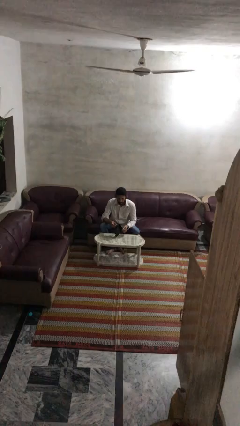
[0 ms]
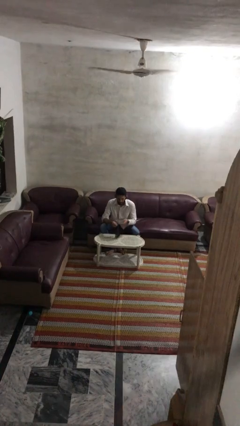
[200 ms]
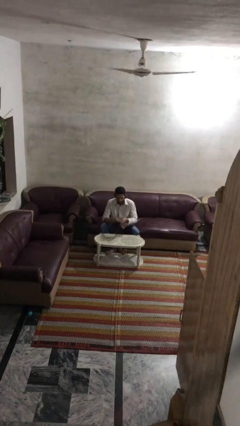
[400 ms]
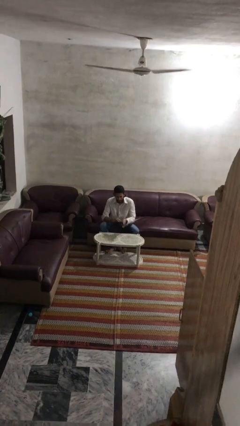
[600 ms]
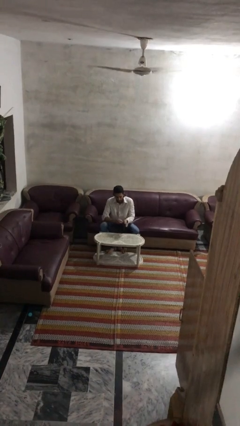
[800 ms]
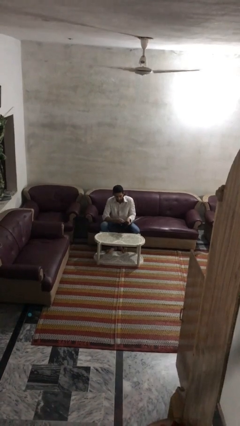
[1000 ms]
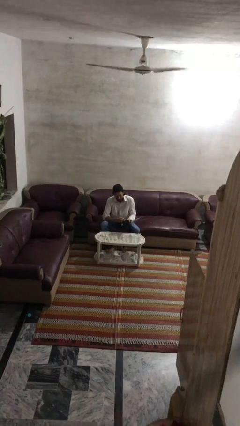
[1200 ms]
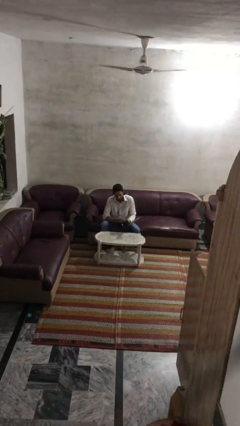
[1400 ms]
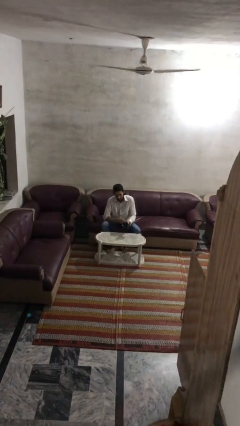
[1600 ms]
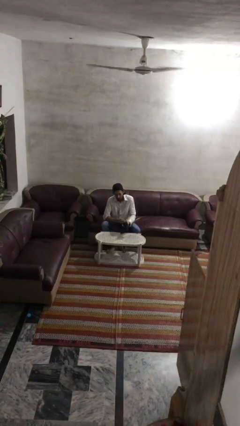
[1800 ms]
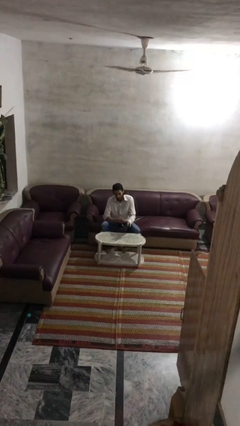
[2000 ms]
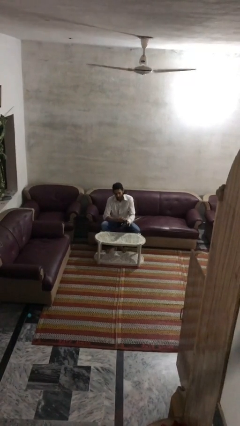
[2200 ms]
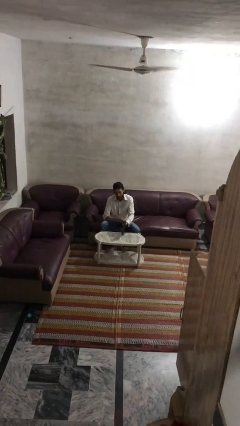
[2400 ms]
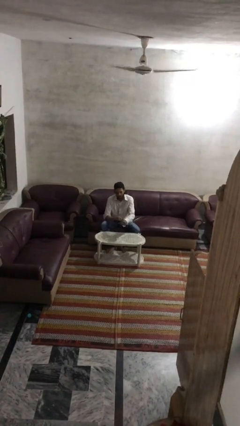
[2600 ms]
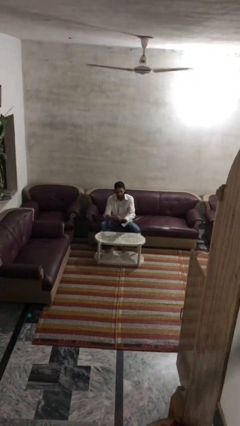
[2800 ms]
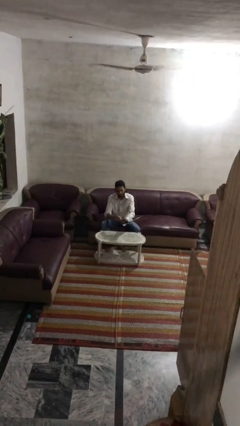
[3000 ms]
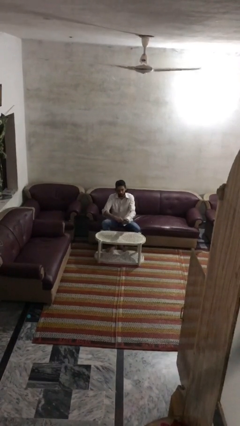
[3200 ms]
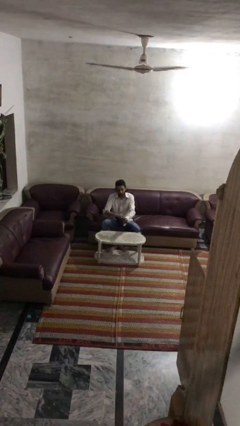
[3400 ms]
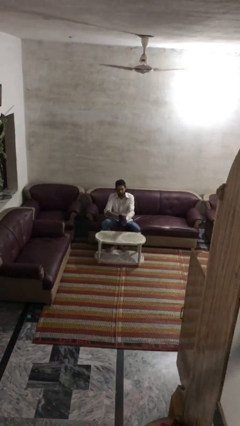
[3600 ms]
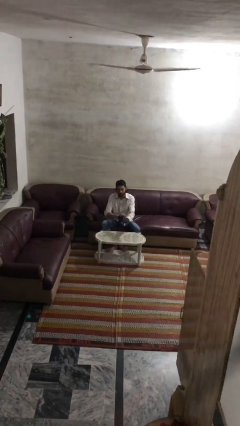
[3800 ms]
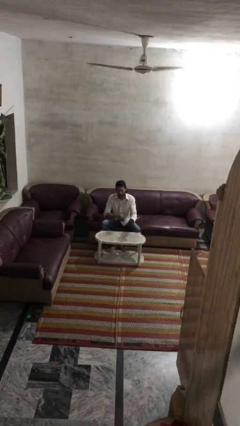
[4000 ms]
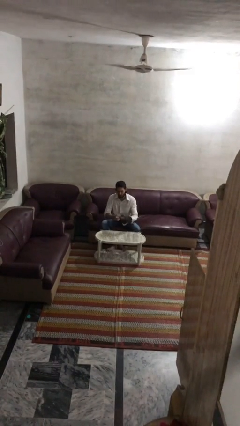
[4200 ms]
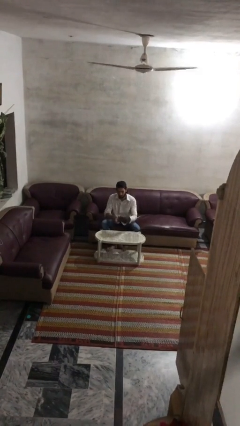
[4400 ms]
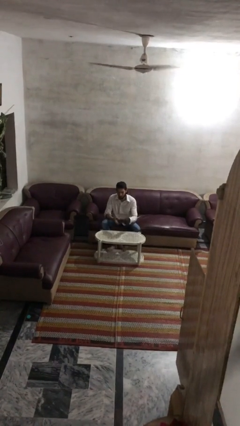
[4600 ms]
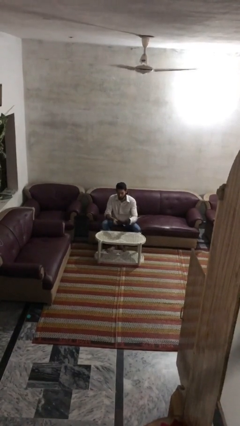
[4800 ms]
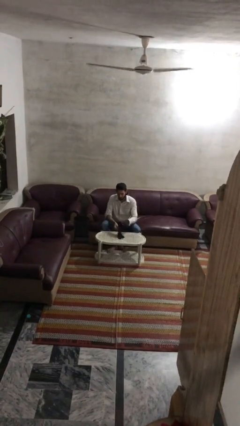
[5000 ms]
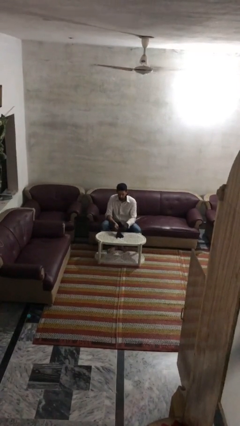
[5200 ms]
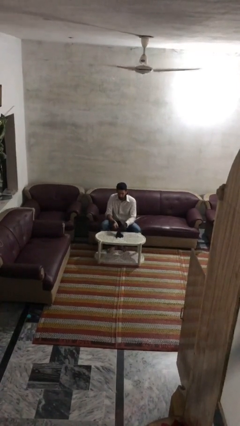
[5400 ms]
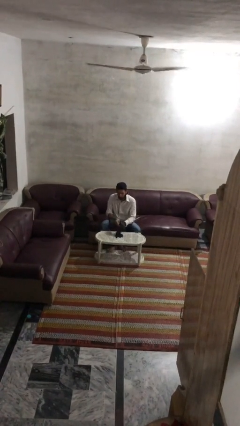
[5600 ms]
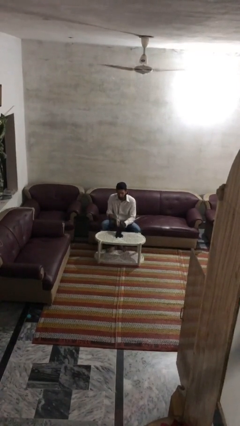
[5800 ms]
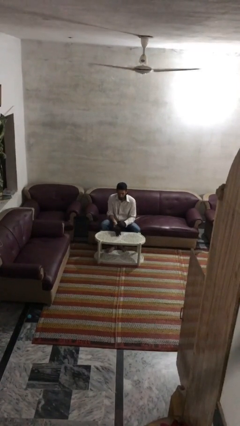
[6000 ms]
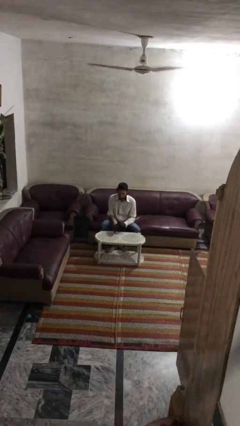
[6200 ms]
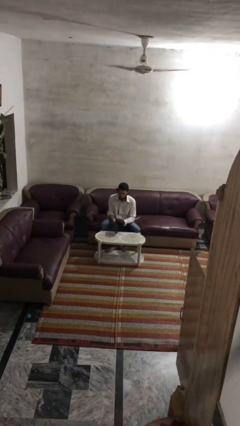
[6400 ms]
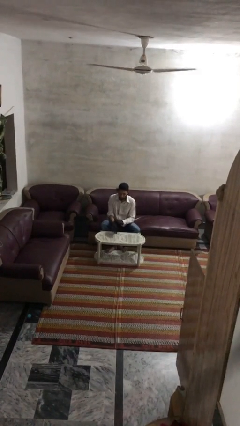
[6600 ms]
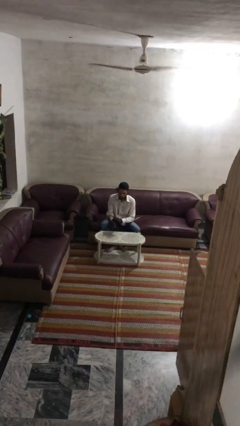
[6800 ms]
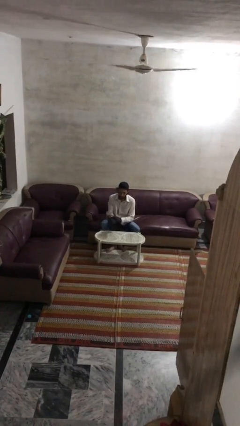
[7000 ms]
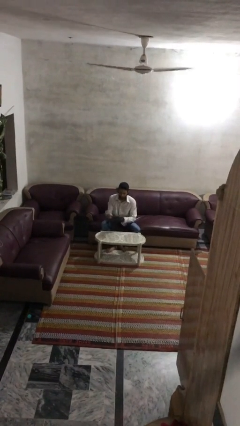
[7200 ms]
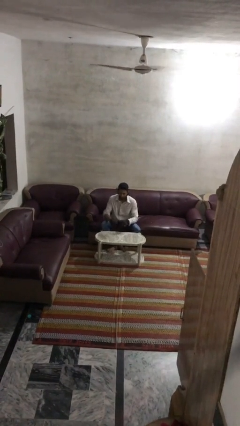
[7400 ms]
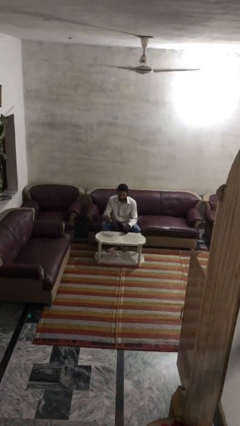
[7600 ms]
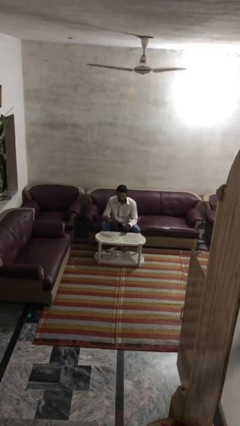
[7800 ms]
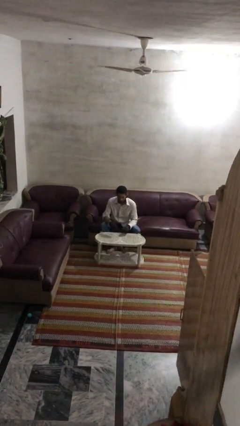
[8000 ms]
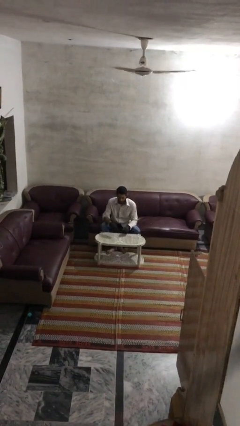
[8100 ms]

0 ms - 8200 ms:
person puts on gloves

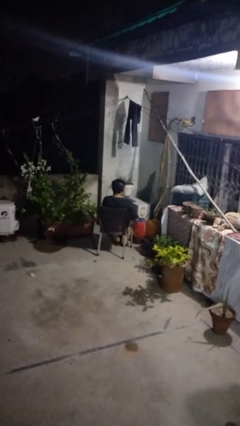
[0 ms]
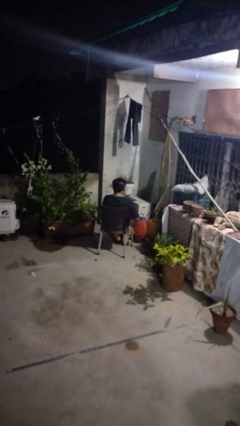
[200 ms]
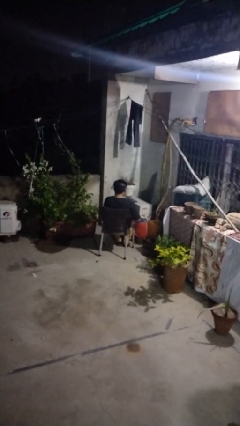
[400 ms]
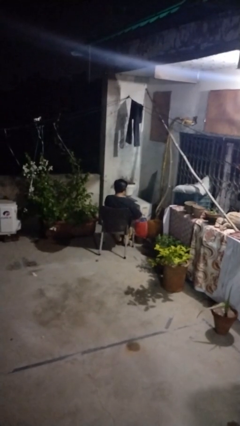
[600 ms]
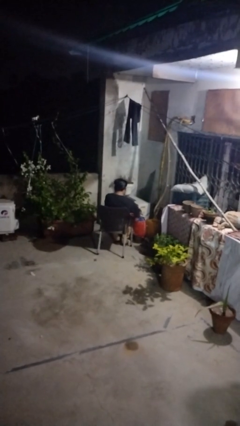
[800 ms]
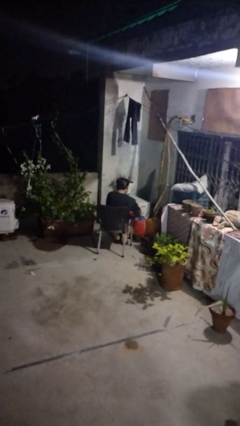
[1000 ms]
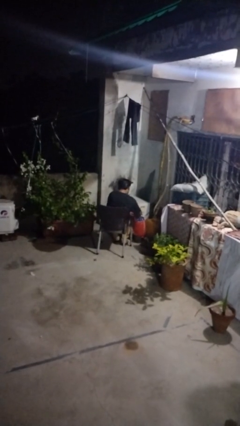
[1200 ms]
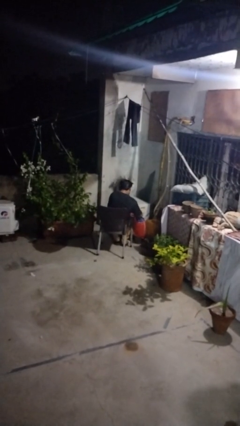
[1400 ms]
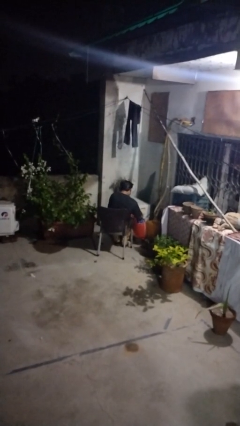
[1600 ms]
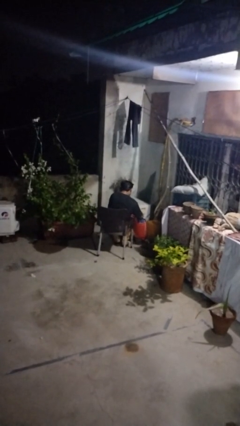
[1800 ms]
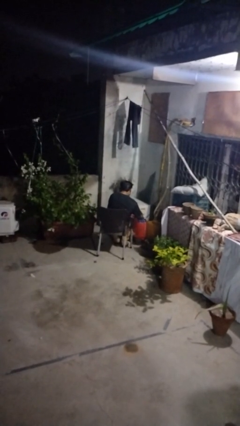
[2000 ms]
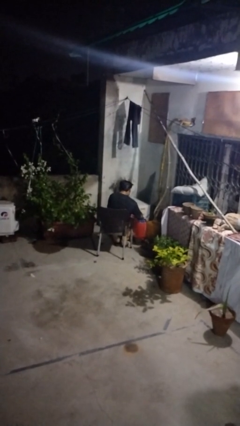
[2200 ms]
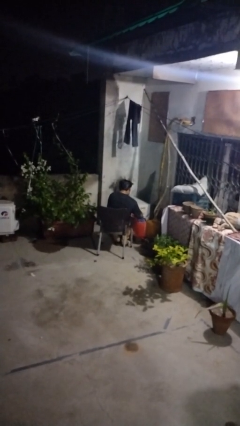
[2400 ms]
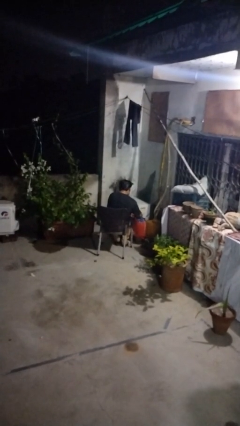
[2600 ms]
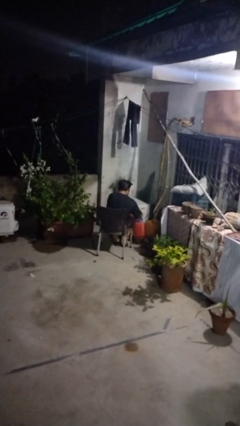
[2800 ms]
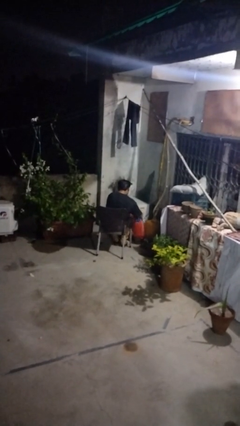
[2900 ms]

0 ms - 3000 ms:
person searches in bag

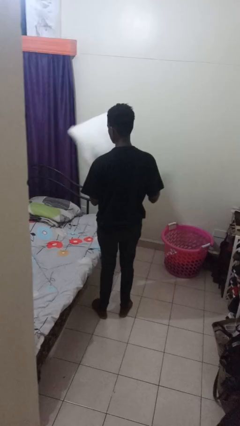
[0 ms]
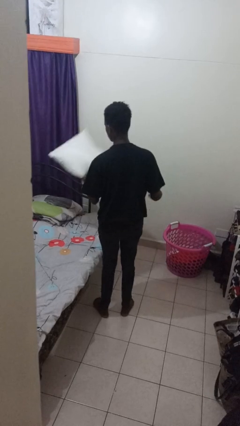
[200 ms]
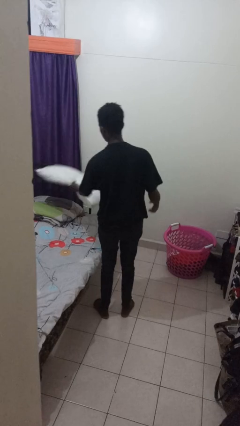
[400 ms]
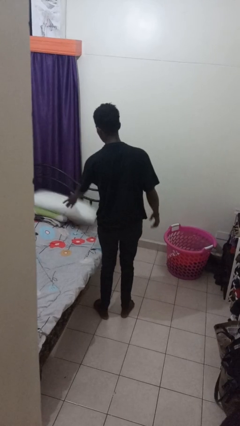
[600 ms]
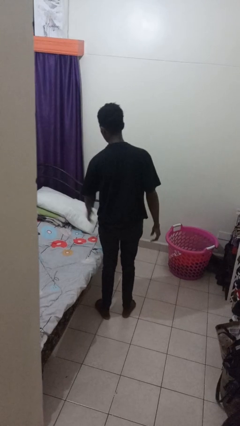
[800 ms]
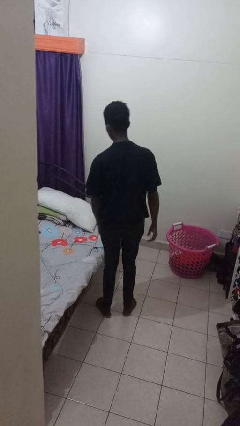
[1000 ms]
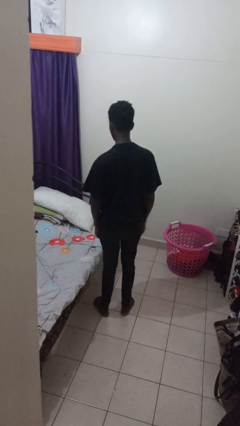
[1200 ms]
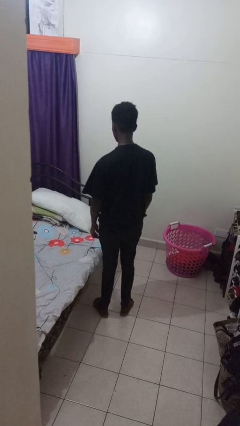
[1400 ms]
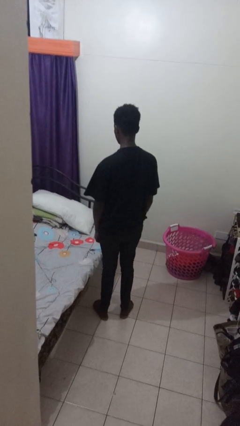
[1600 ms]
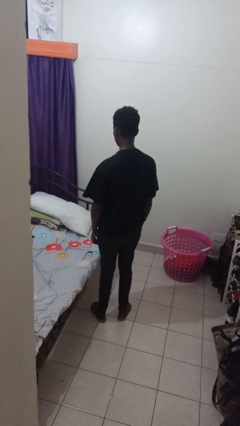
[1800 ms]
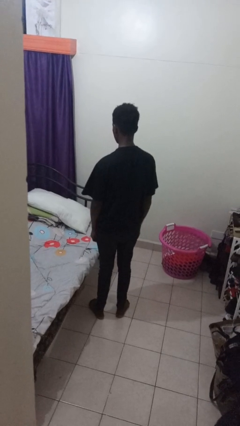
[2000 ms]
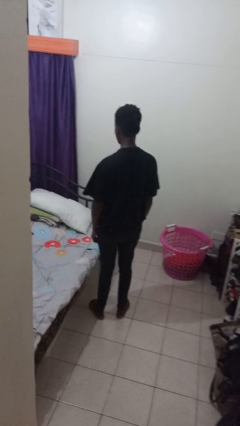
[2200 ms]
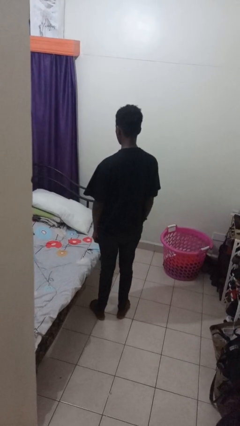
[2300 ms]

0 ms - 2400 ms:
person puts down object on bed

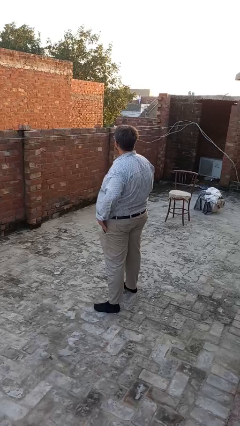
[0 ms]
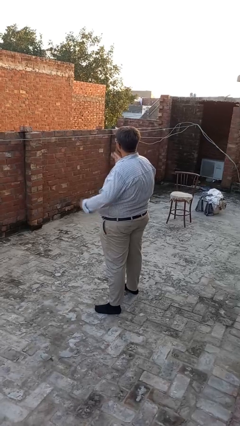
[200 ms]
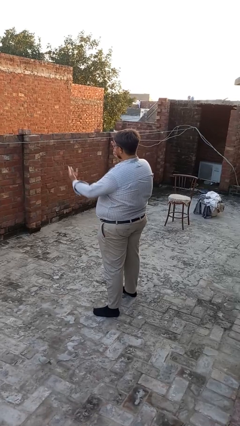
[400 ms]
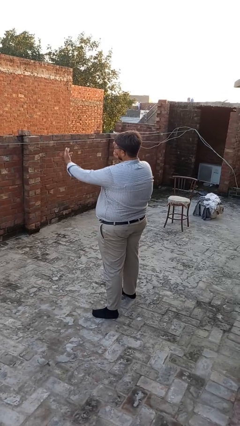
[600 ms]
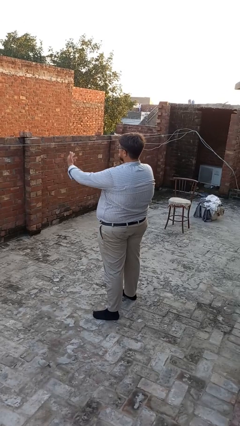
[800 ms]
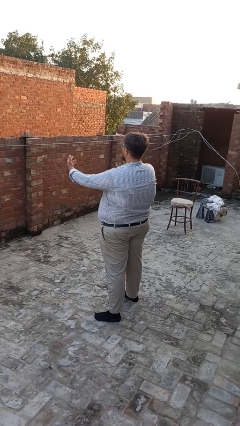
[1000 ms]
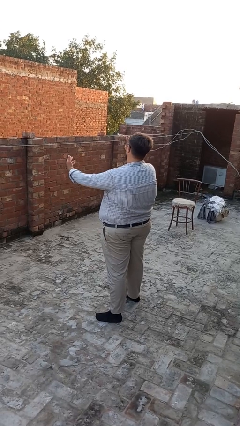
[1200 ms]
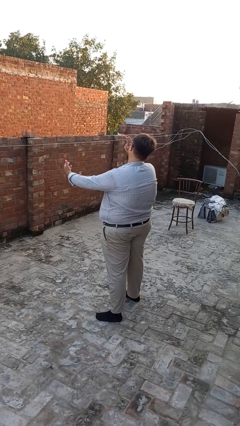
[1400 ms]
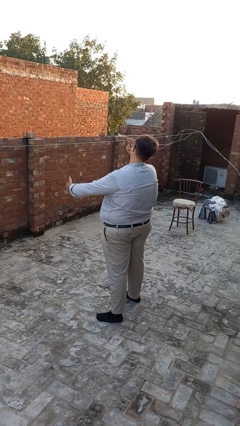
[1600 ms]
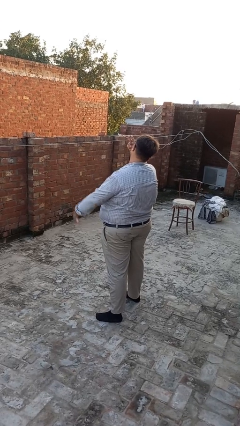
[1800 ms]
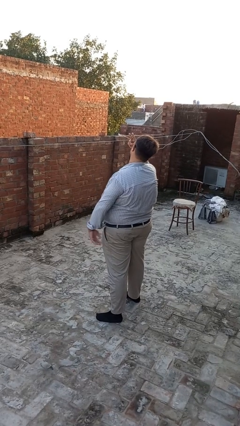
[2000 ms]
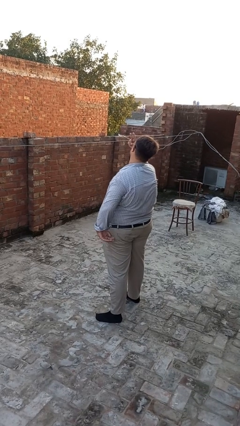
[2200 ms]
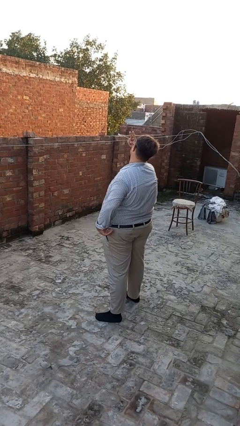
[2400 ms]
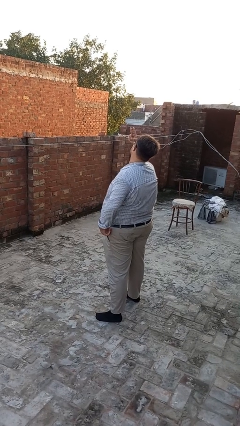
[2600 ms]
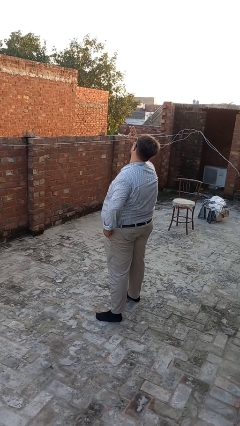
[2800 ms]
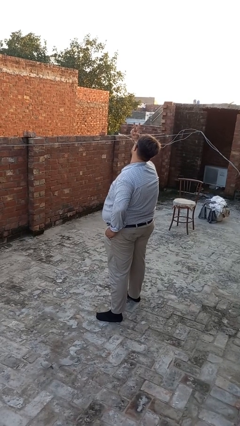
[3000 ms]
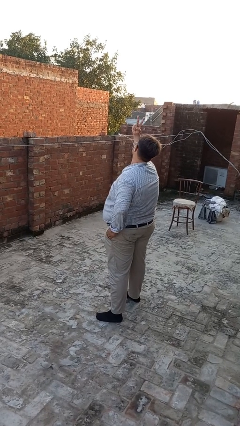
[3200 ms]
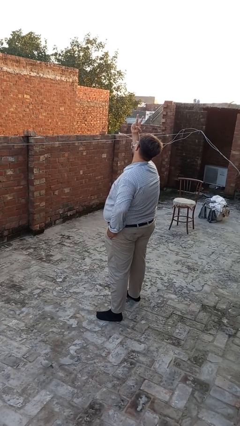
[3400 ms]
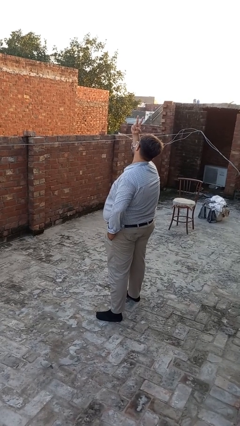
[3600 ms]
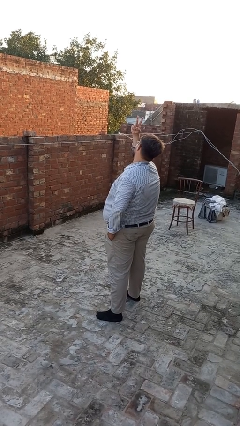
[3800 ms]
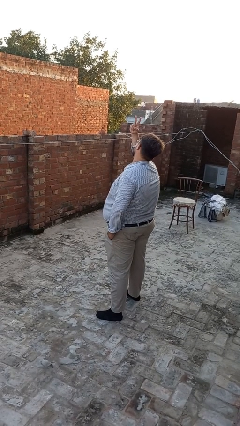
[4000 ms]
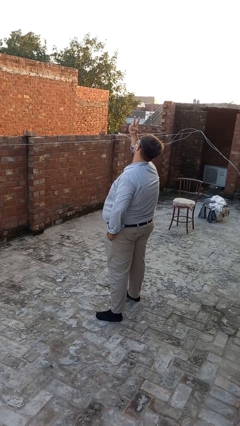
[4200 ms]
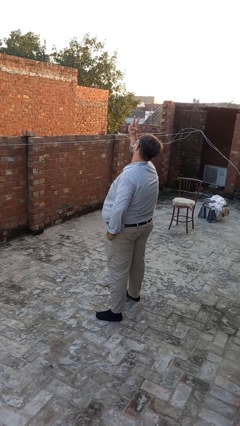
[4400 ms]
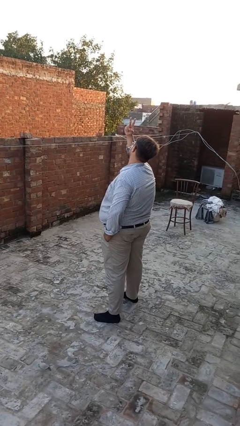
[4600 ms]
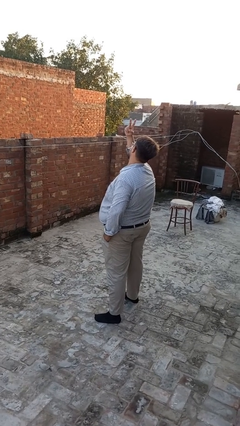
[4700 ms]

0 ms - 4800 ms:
person gestures peace
